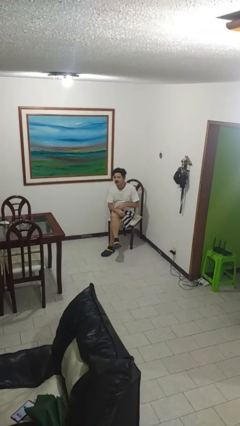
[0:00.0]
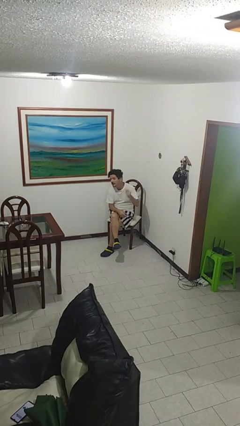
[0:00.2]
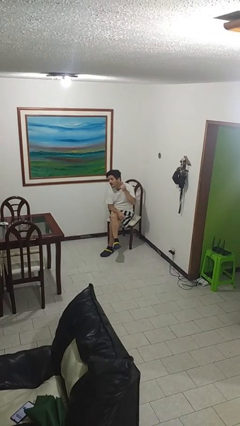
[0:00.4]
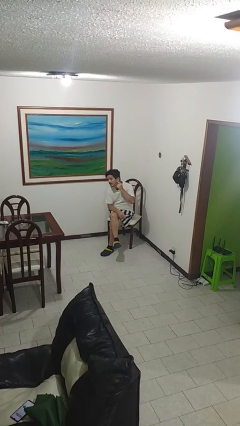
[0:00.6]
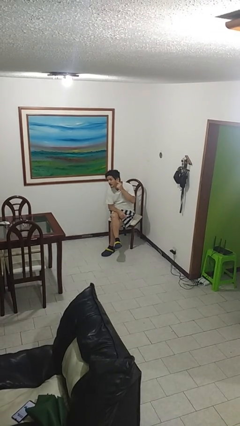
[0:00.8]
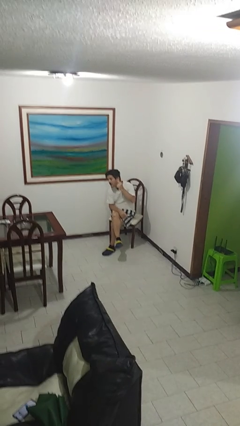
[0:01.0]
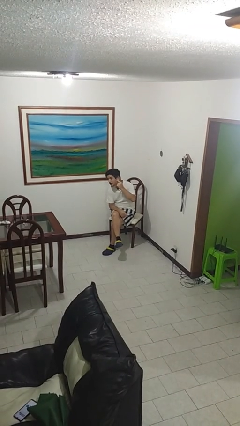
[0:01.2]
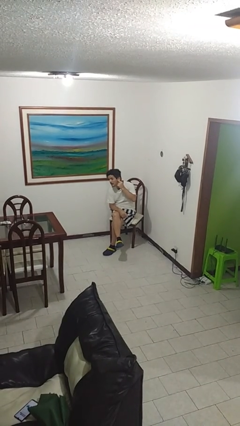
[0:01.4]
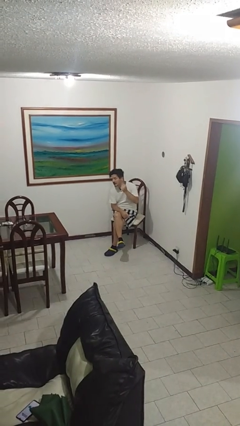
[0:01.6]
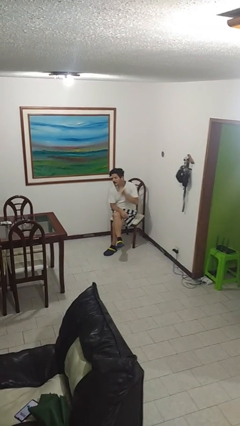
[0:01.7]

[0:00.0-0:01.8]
person gestures listen closely

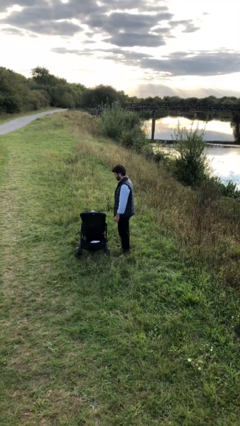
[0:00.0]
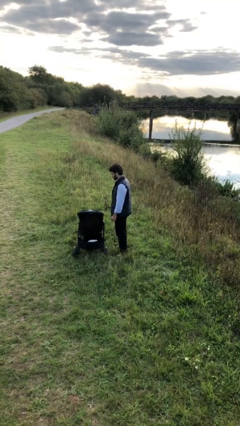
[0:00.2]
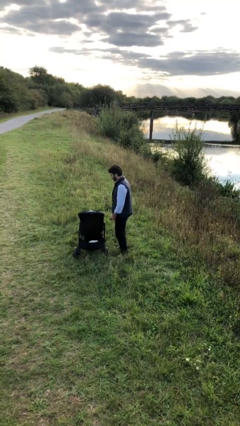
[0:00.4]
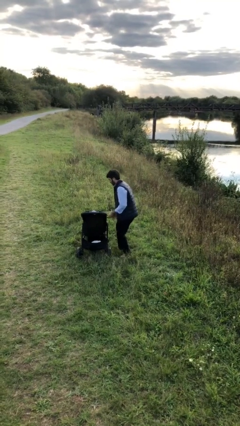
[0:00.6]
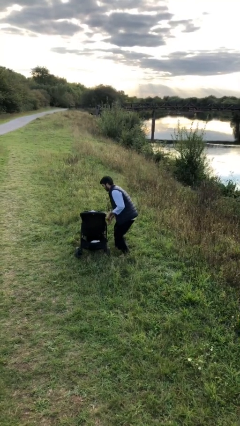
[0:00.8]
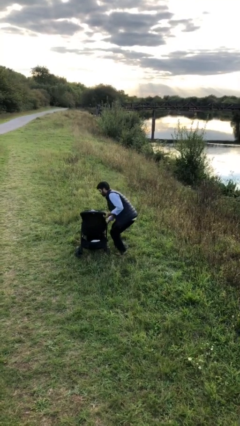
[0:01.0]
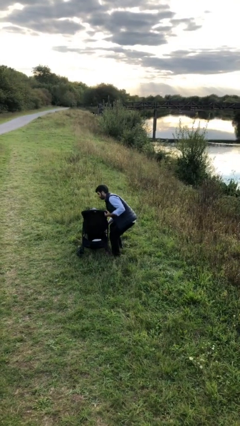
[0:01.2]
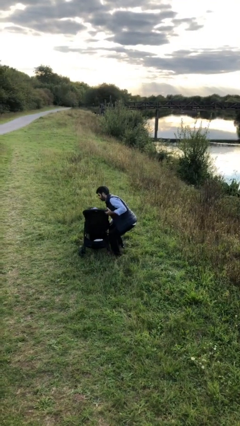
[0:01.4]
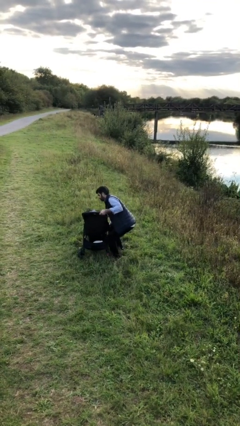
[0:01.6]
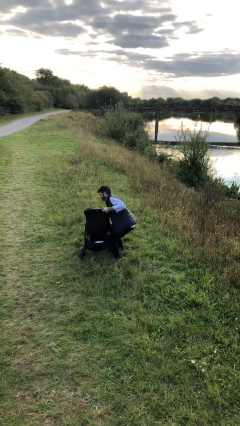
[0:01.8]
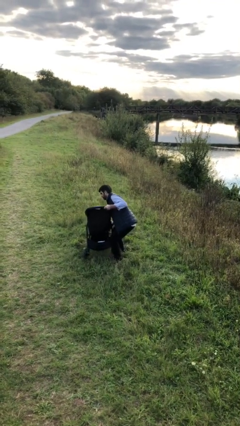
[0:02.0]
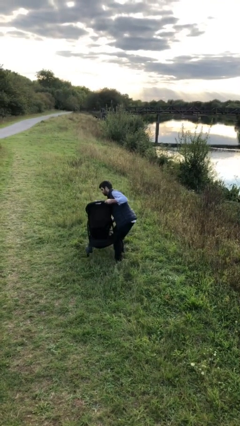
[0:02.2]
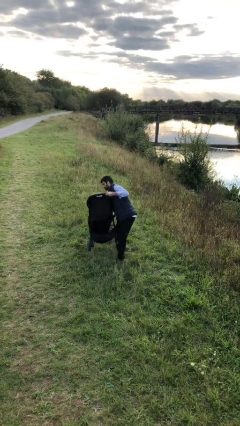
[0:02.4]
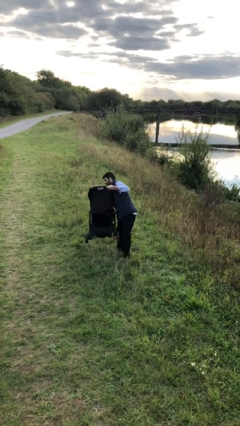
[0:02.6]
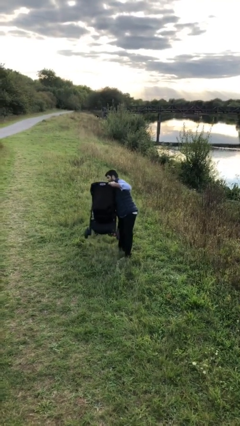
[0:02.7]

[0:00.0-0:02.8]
person picks up object from floor

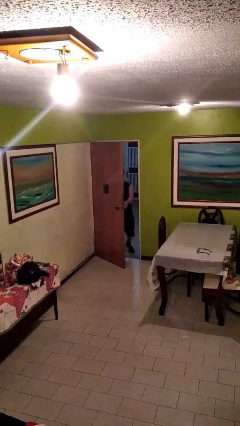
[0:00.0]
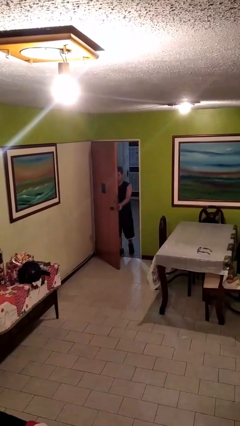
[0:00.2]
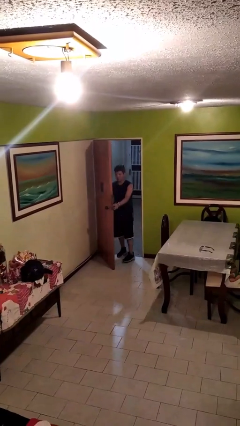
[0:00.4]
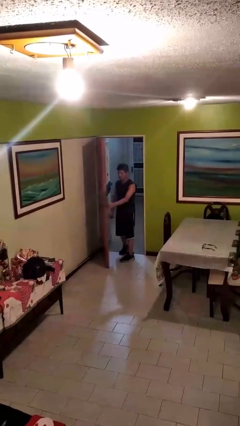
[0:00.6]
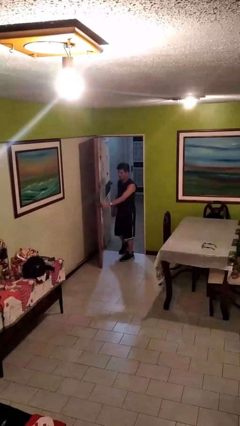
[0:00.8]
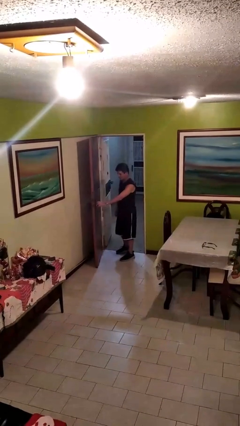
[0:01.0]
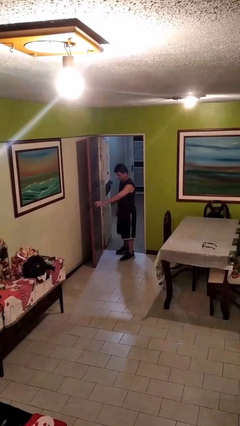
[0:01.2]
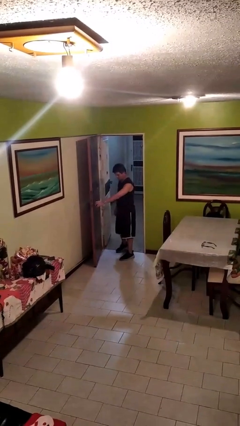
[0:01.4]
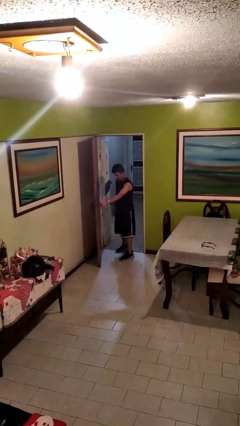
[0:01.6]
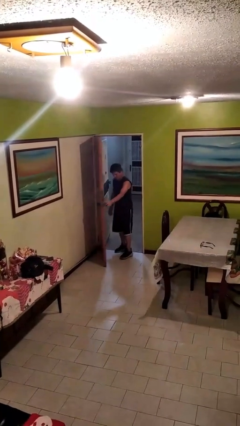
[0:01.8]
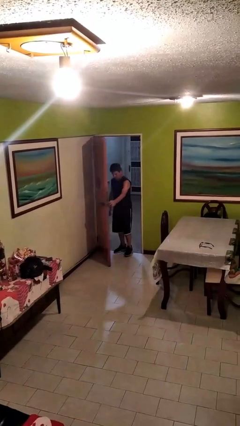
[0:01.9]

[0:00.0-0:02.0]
person opens facility door

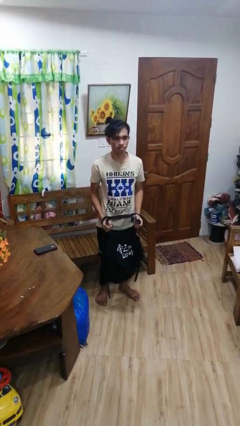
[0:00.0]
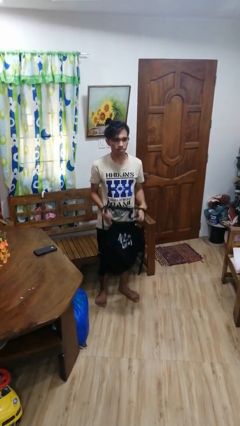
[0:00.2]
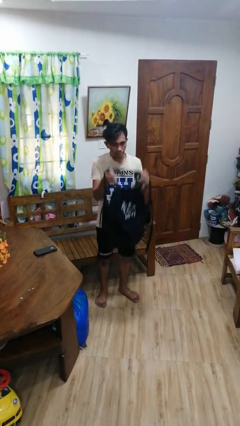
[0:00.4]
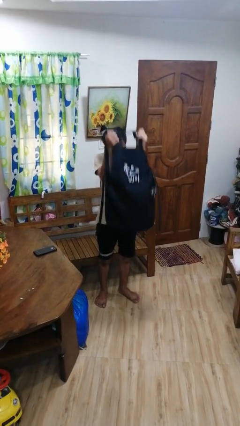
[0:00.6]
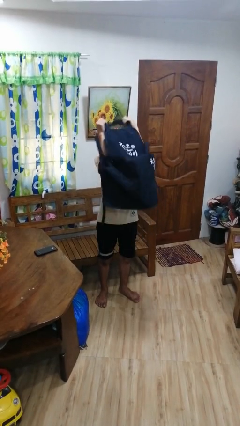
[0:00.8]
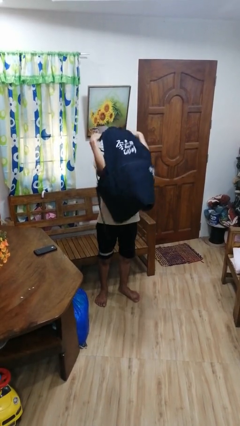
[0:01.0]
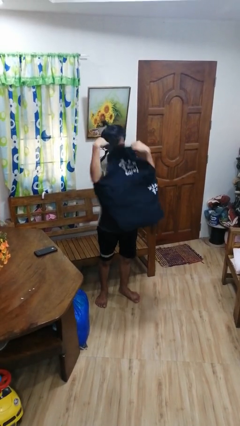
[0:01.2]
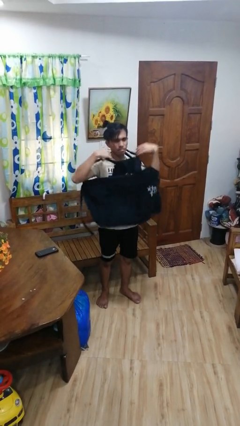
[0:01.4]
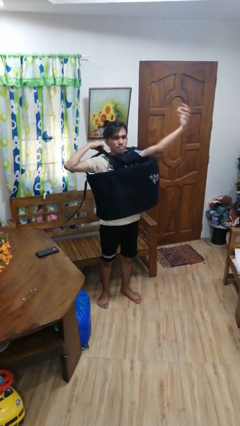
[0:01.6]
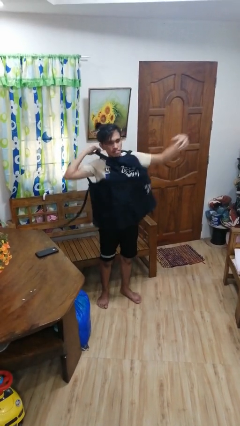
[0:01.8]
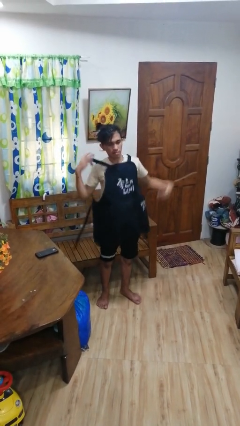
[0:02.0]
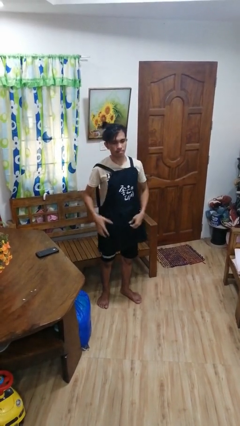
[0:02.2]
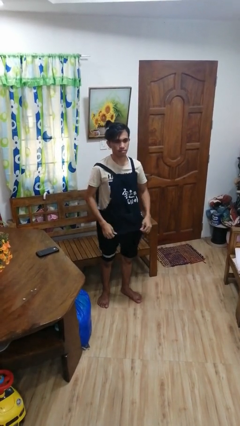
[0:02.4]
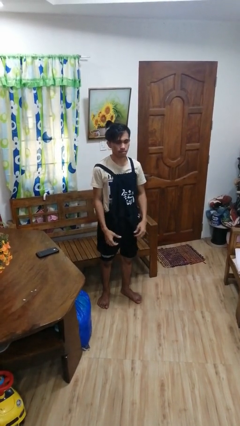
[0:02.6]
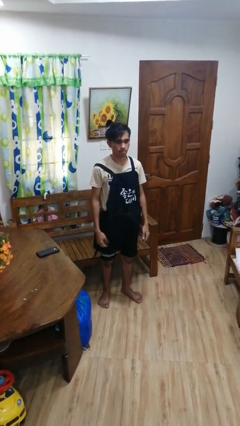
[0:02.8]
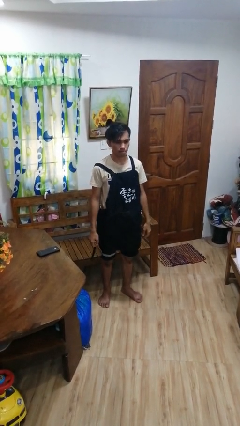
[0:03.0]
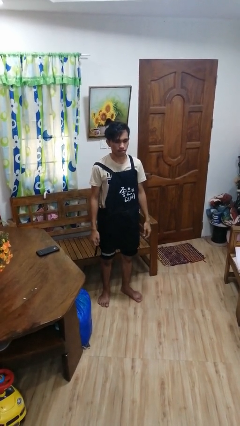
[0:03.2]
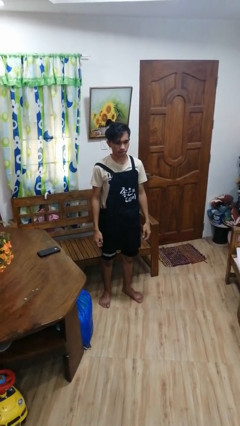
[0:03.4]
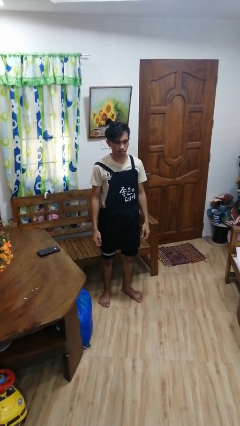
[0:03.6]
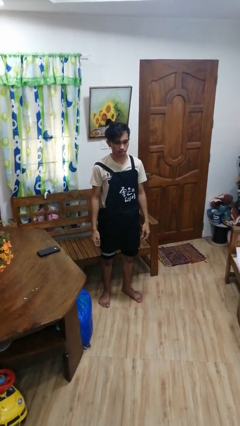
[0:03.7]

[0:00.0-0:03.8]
person puts on apron

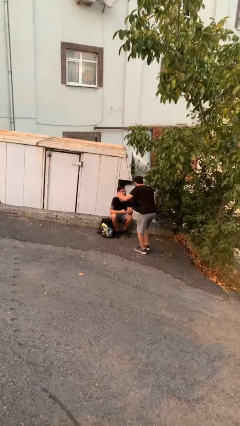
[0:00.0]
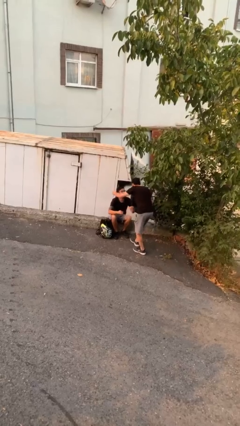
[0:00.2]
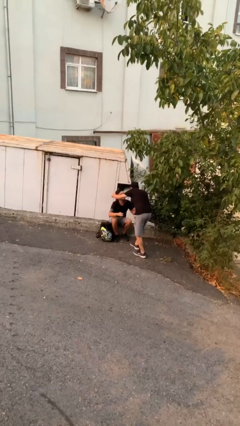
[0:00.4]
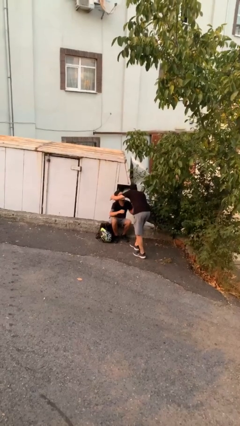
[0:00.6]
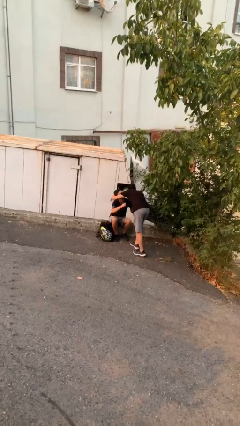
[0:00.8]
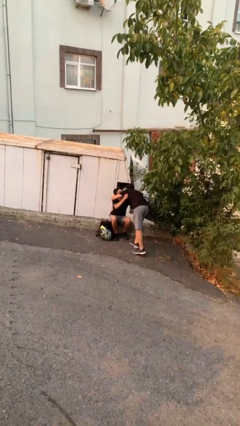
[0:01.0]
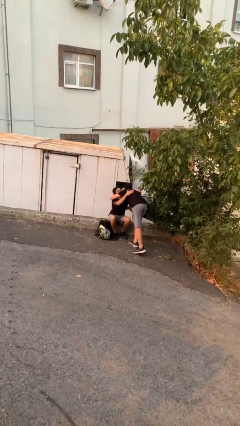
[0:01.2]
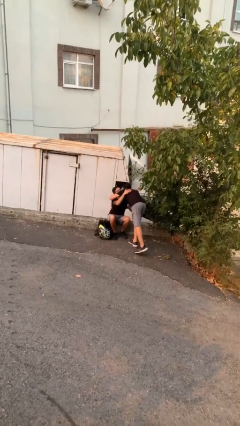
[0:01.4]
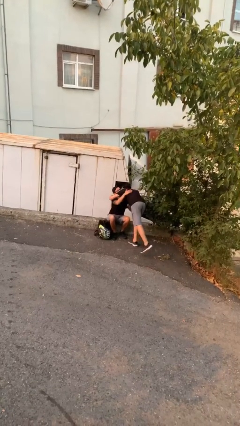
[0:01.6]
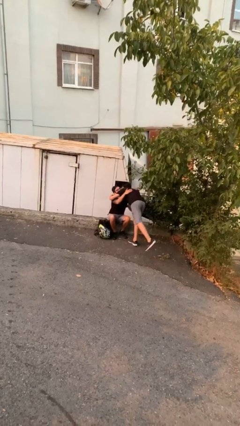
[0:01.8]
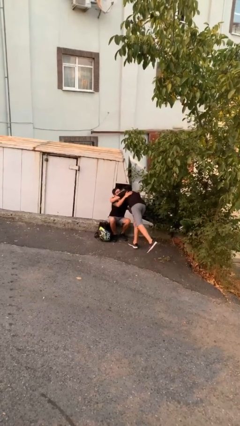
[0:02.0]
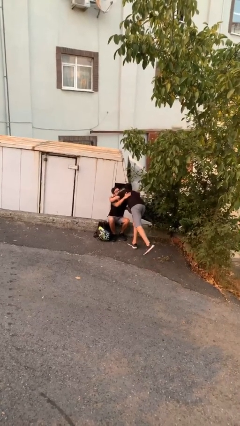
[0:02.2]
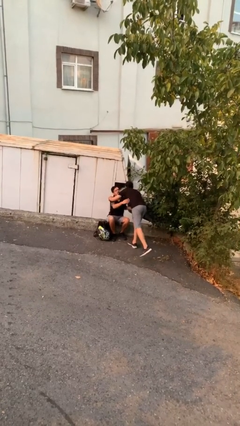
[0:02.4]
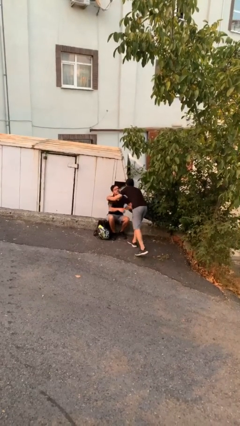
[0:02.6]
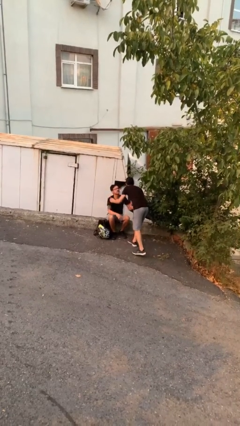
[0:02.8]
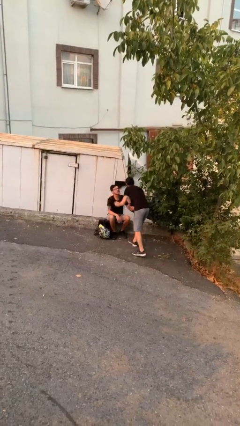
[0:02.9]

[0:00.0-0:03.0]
person embraces person

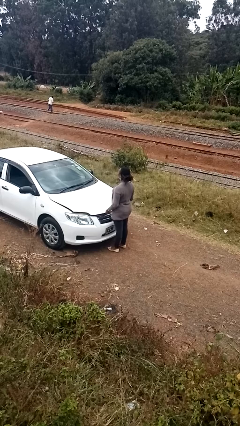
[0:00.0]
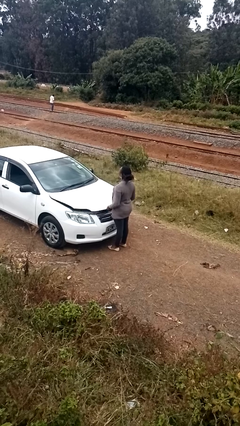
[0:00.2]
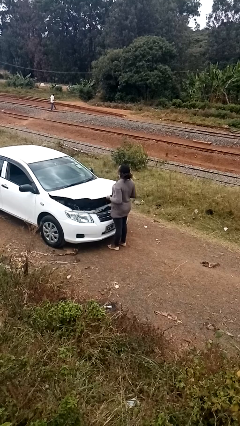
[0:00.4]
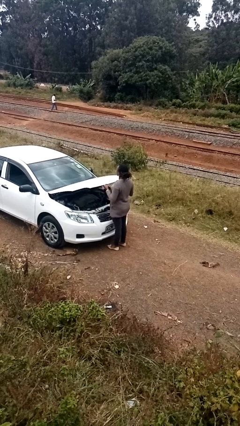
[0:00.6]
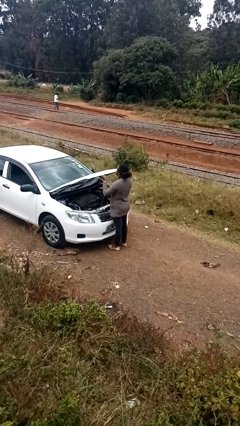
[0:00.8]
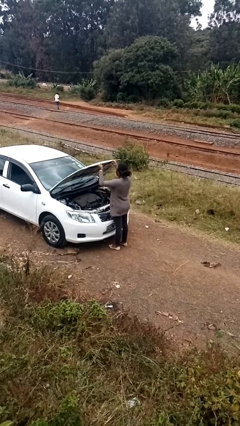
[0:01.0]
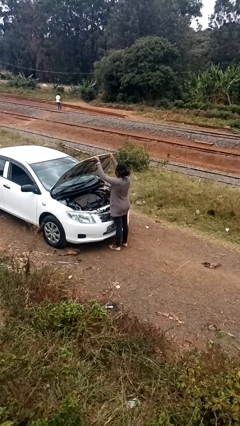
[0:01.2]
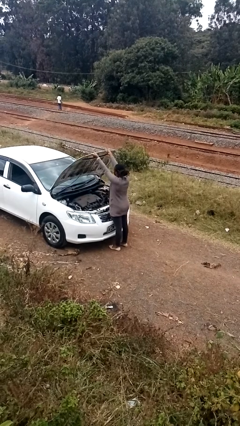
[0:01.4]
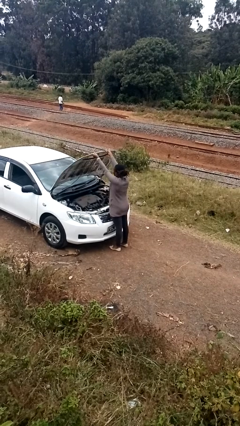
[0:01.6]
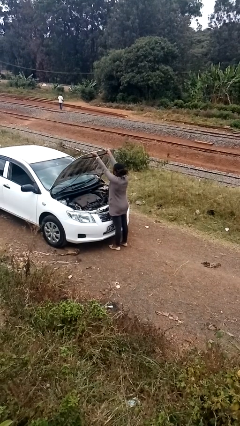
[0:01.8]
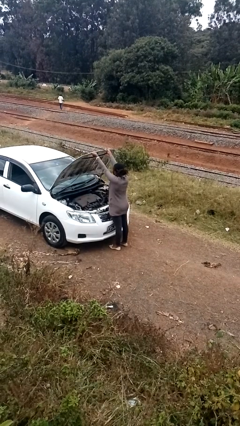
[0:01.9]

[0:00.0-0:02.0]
person opens car hood

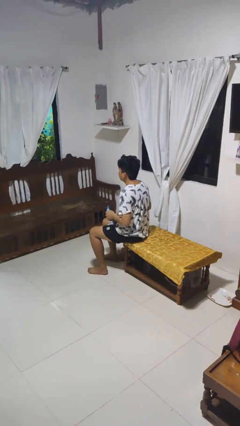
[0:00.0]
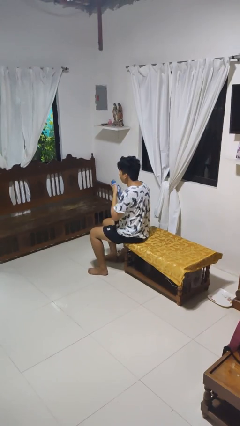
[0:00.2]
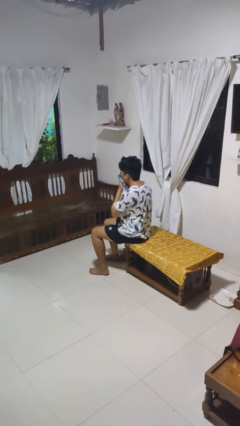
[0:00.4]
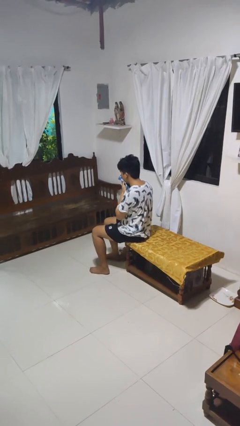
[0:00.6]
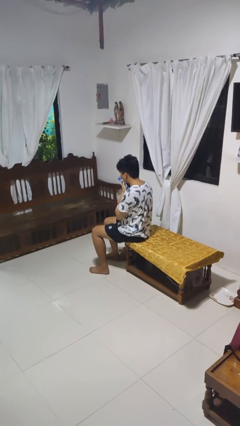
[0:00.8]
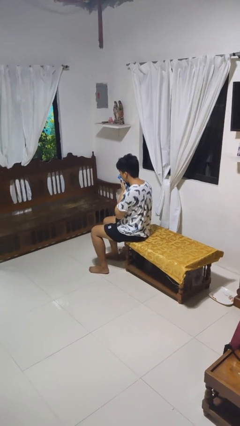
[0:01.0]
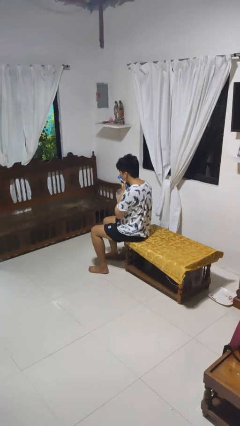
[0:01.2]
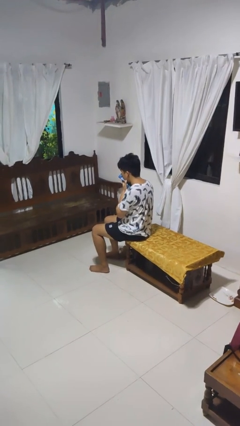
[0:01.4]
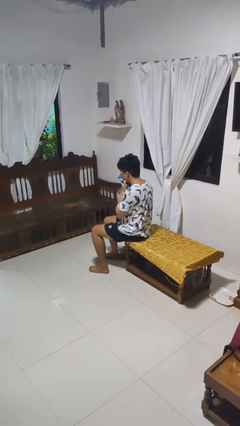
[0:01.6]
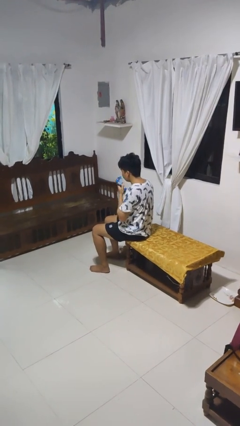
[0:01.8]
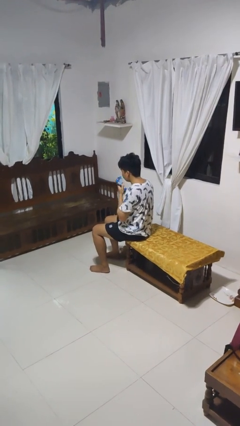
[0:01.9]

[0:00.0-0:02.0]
person blows nose
